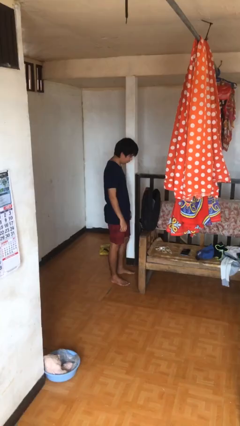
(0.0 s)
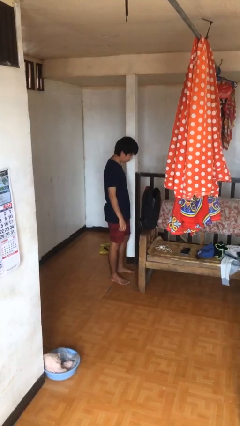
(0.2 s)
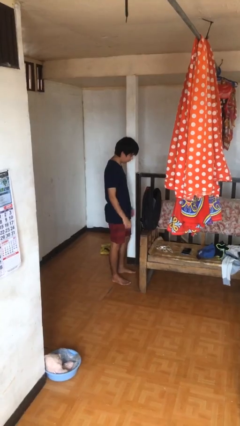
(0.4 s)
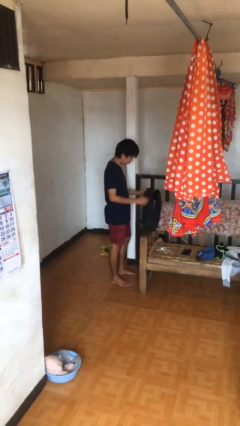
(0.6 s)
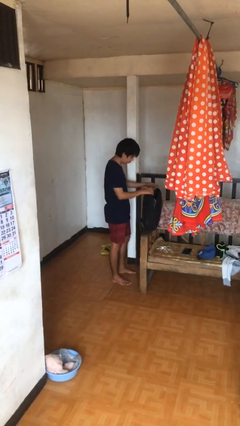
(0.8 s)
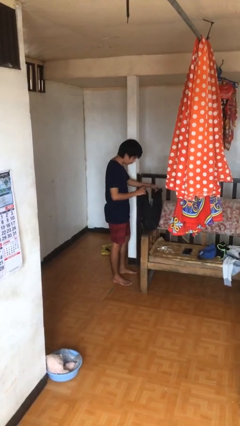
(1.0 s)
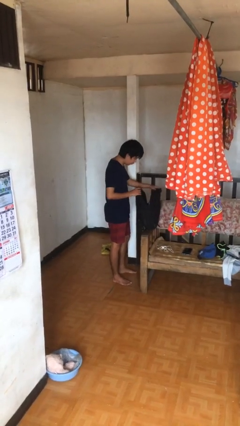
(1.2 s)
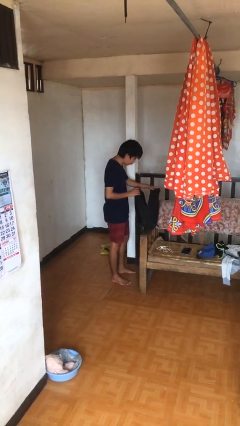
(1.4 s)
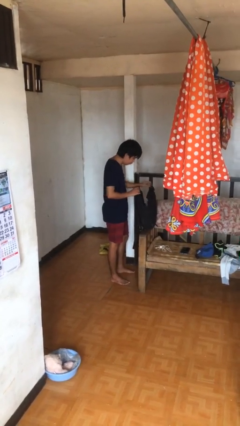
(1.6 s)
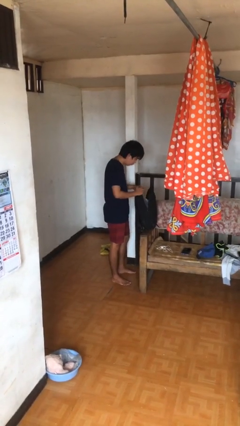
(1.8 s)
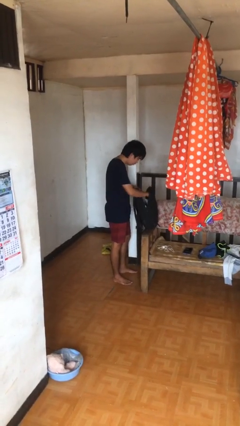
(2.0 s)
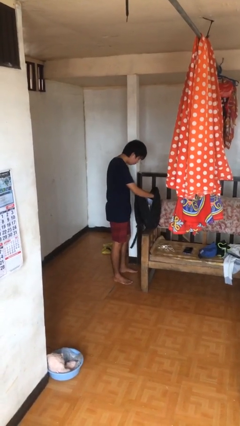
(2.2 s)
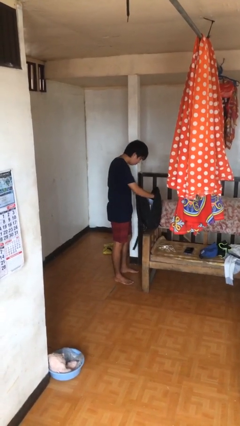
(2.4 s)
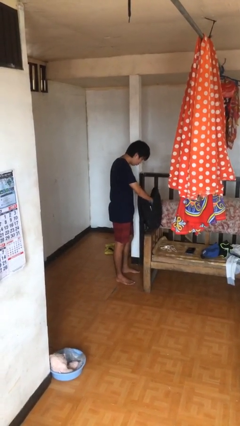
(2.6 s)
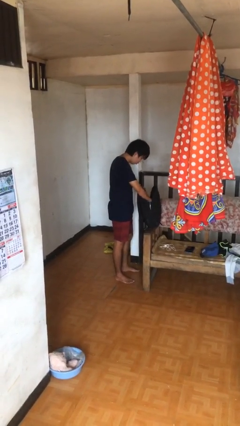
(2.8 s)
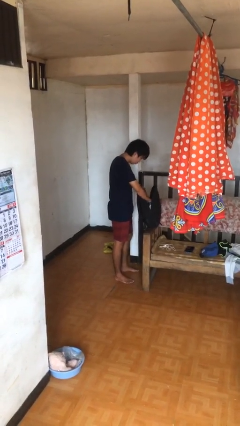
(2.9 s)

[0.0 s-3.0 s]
person searches in backpack

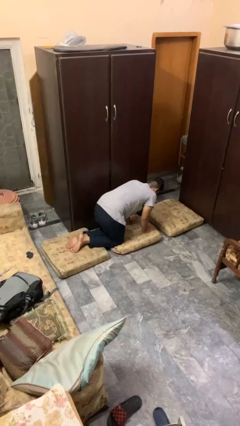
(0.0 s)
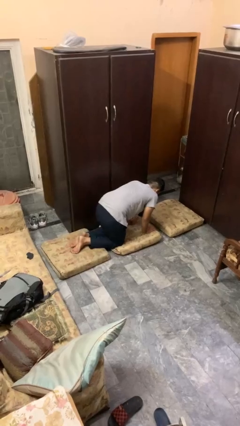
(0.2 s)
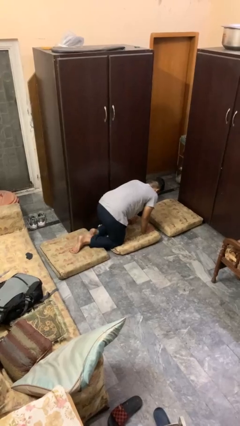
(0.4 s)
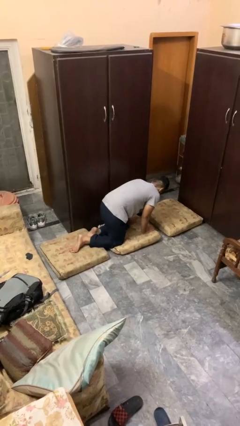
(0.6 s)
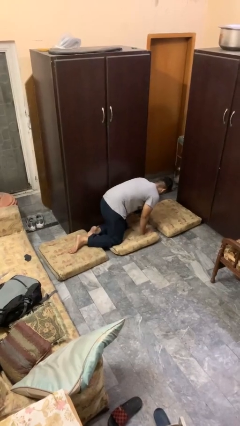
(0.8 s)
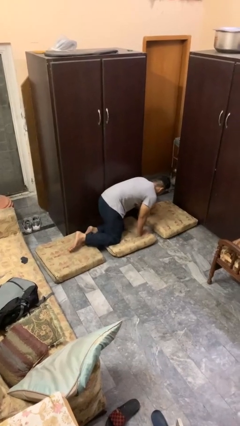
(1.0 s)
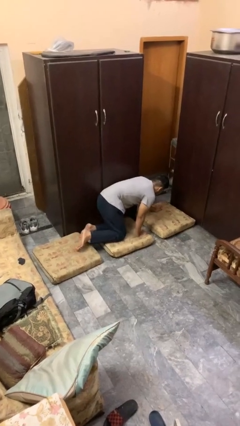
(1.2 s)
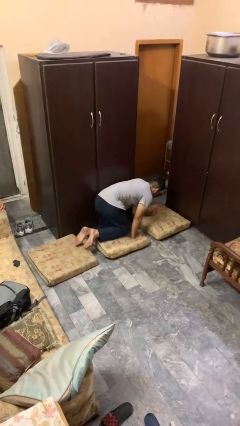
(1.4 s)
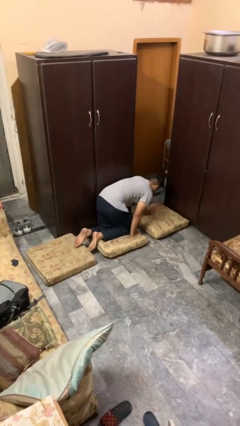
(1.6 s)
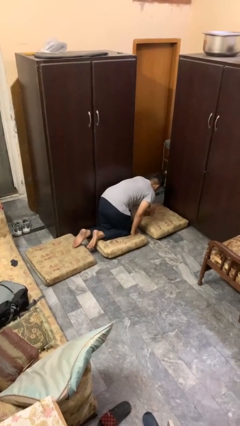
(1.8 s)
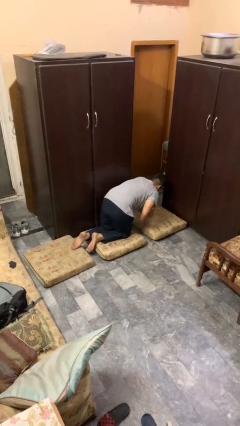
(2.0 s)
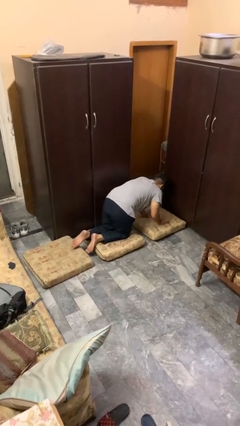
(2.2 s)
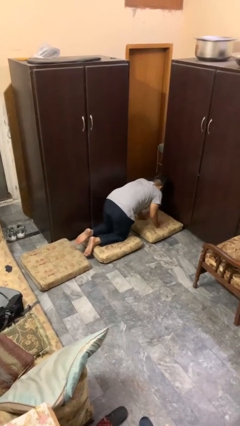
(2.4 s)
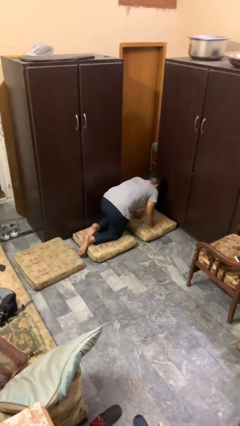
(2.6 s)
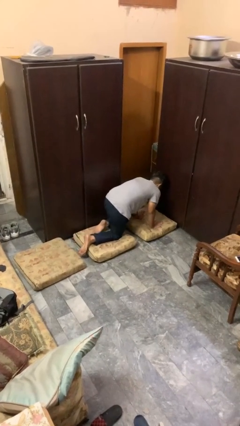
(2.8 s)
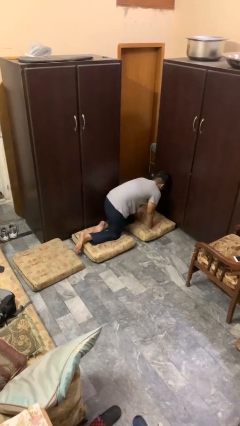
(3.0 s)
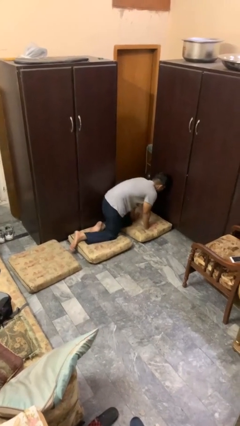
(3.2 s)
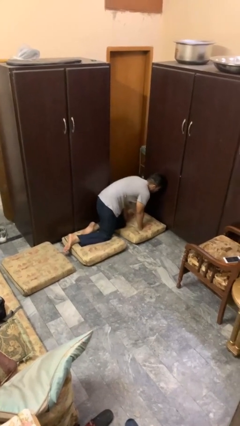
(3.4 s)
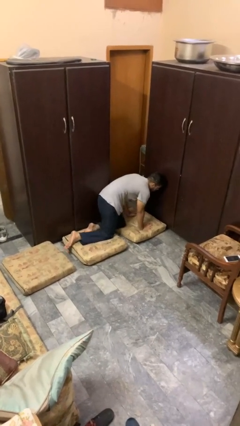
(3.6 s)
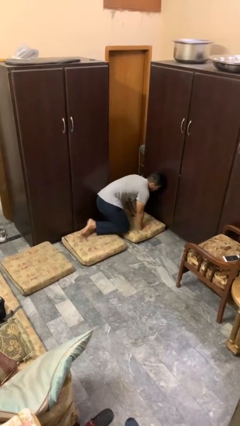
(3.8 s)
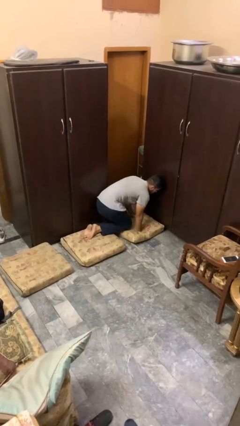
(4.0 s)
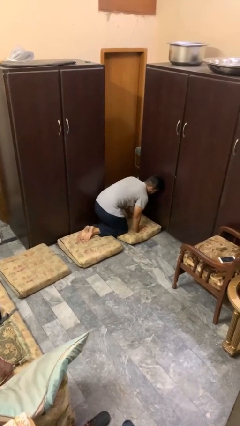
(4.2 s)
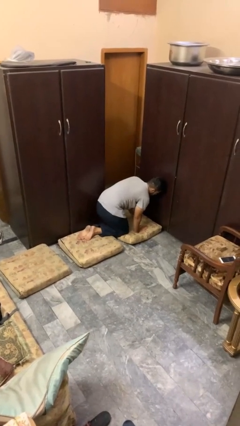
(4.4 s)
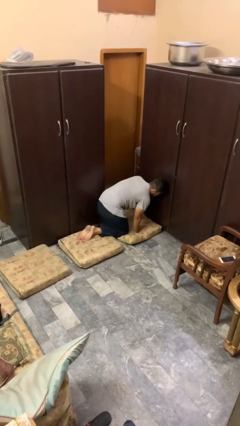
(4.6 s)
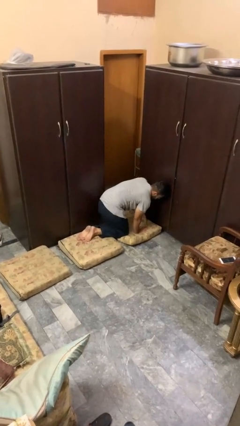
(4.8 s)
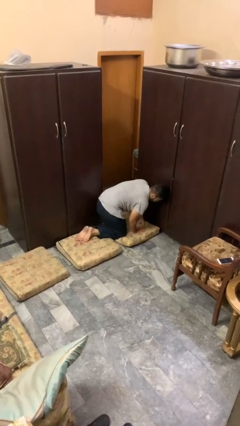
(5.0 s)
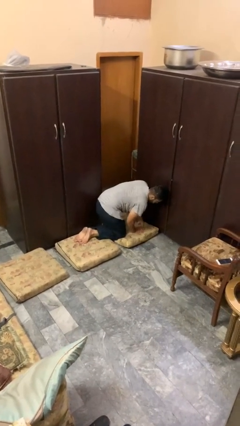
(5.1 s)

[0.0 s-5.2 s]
person crawls

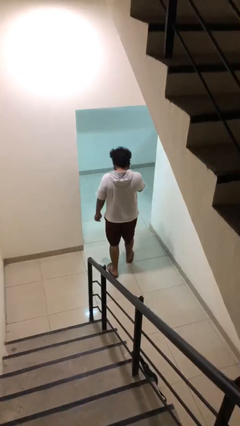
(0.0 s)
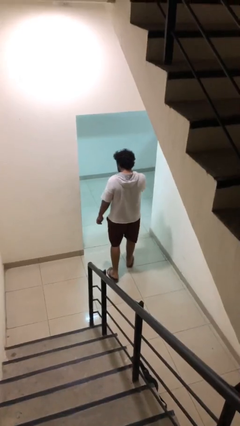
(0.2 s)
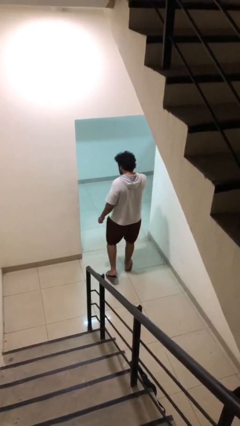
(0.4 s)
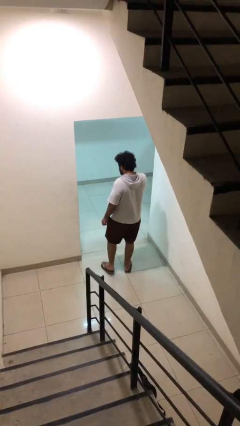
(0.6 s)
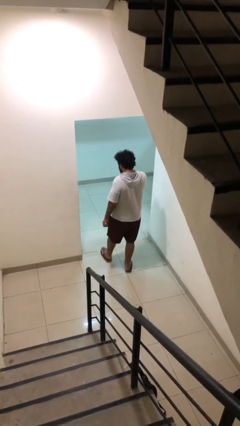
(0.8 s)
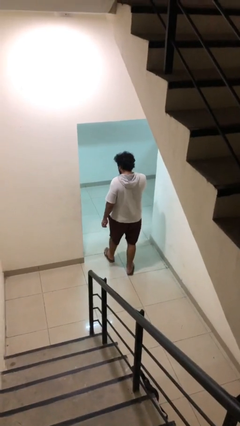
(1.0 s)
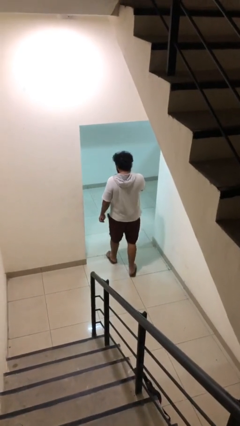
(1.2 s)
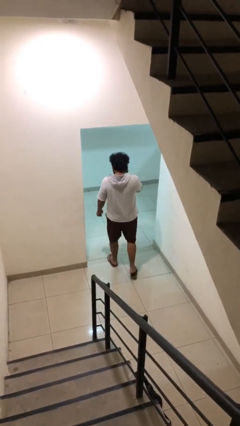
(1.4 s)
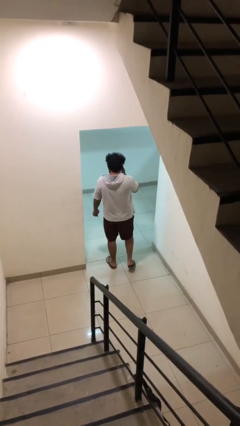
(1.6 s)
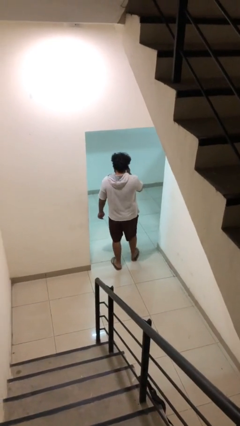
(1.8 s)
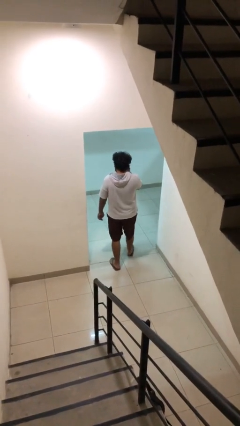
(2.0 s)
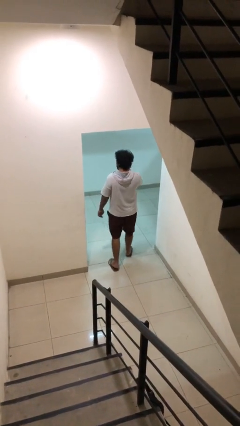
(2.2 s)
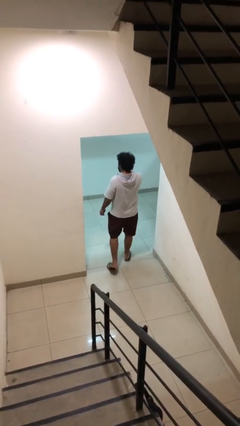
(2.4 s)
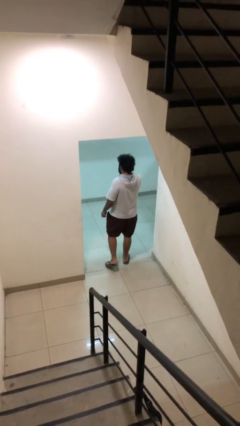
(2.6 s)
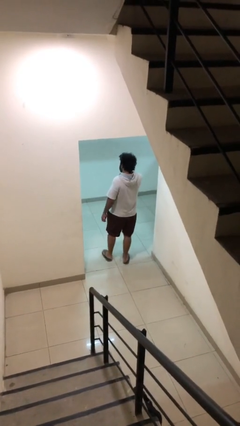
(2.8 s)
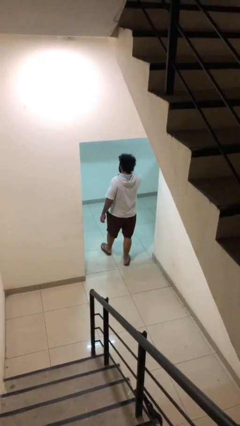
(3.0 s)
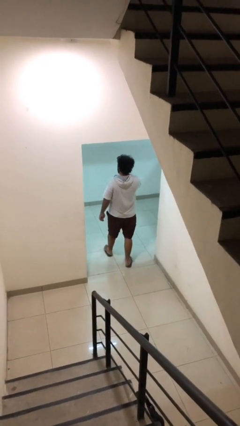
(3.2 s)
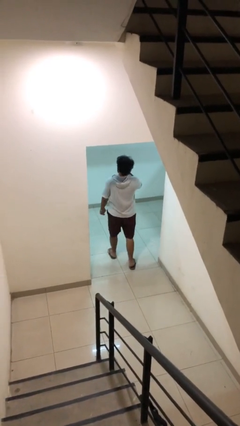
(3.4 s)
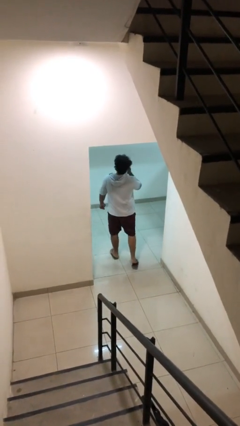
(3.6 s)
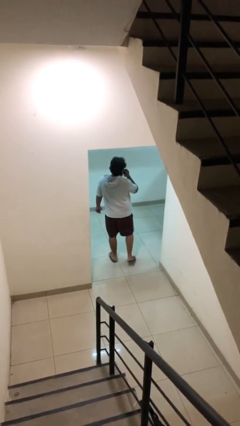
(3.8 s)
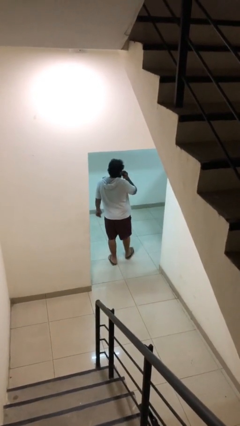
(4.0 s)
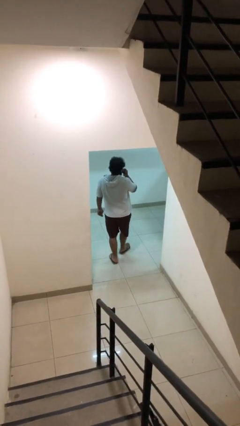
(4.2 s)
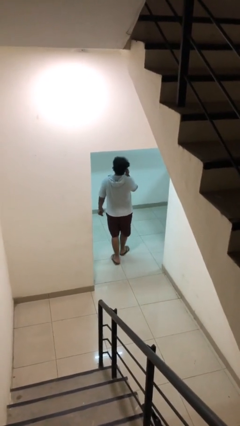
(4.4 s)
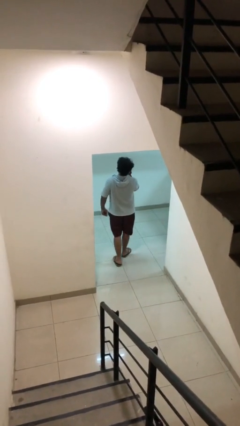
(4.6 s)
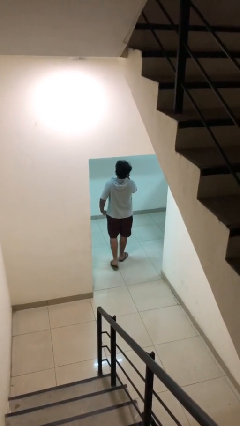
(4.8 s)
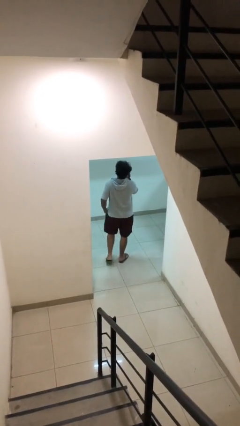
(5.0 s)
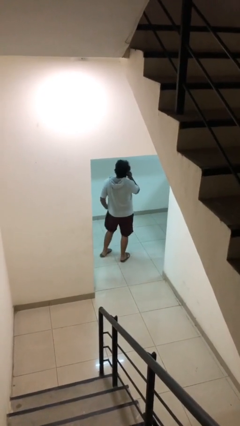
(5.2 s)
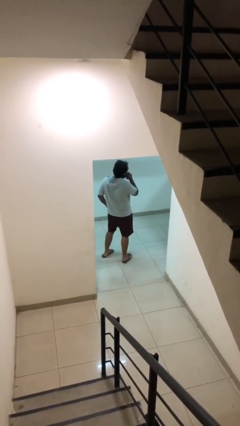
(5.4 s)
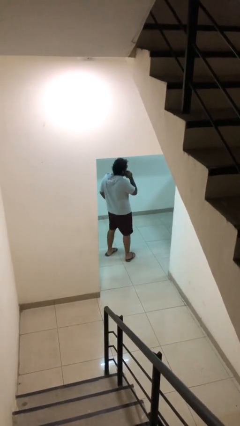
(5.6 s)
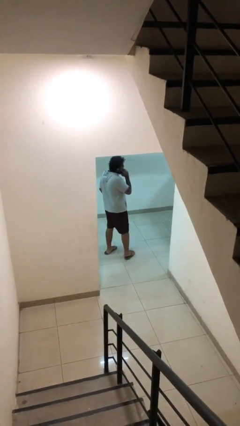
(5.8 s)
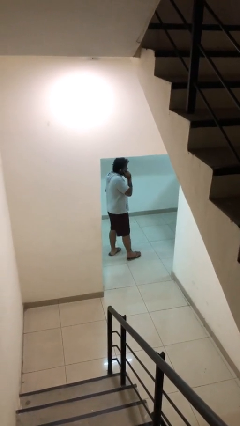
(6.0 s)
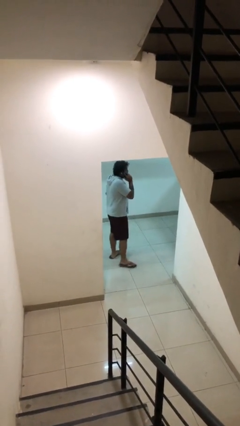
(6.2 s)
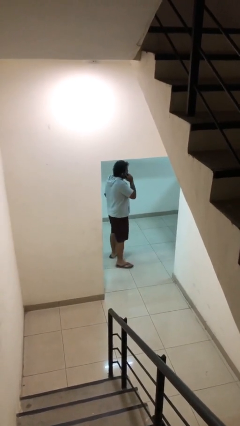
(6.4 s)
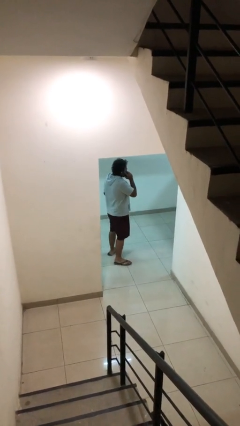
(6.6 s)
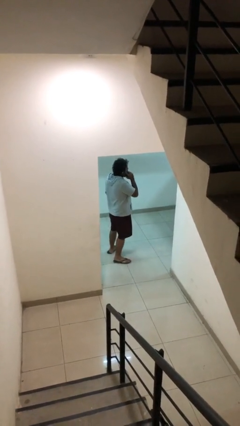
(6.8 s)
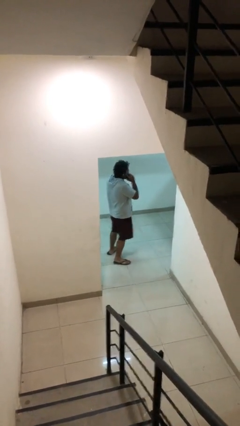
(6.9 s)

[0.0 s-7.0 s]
person exits scene through structure

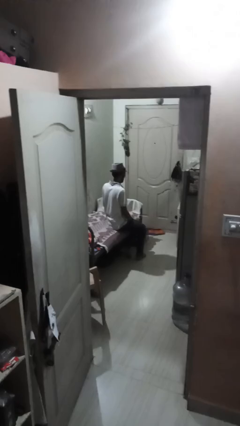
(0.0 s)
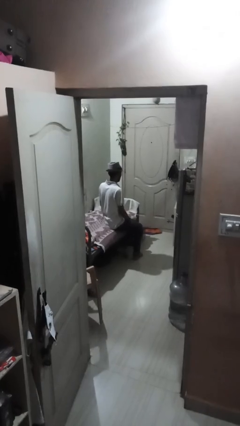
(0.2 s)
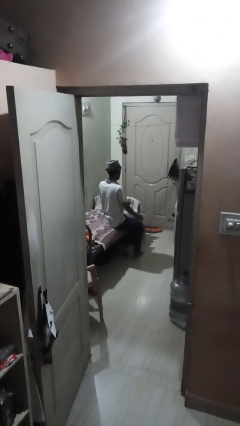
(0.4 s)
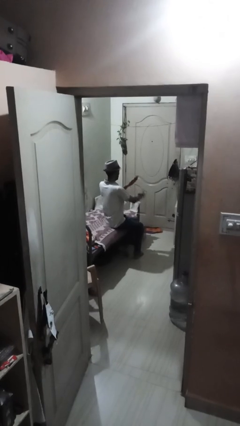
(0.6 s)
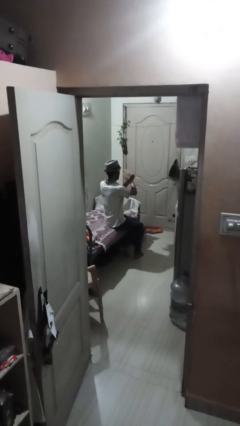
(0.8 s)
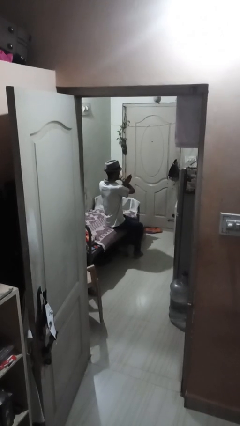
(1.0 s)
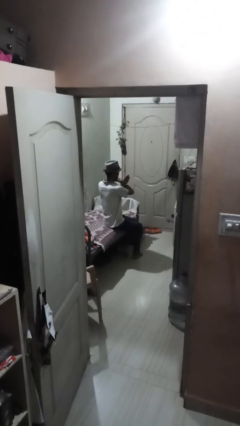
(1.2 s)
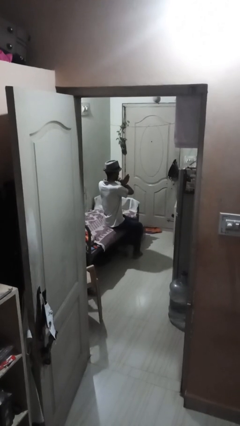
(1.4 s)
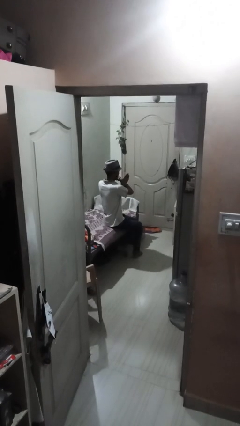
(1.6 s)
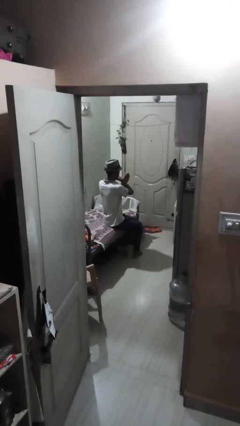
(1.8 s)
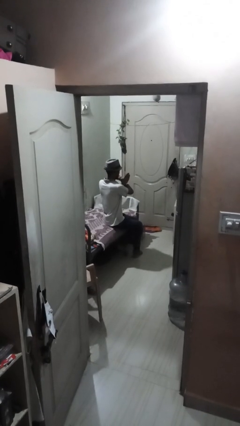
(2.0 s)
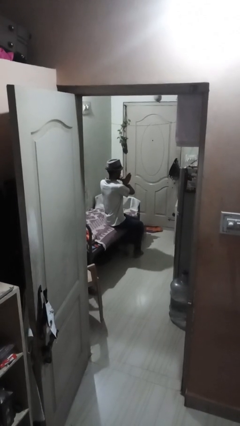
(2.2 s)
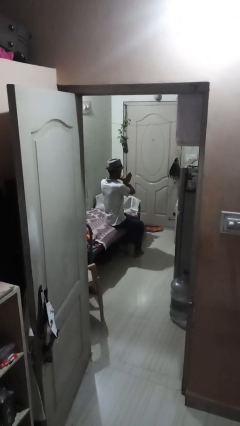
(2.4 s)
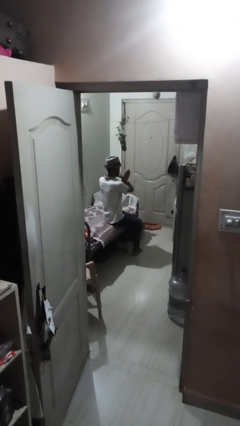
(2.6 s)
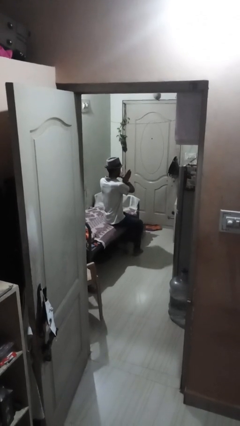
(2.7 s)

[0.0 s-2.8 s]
person gestures arms x
